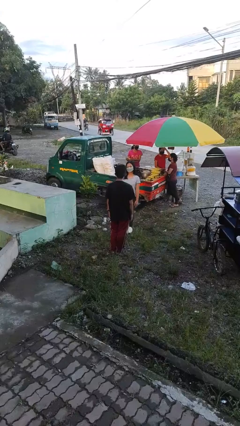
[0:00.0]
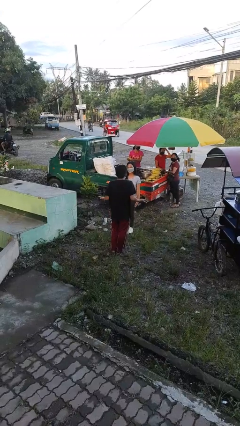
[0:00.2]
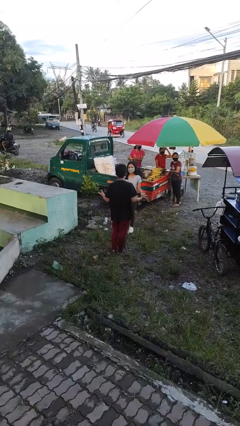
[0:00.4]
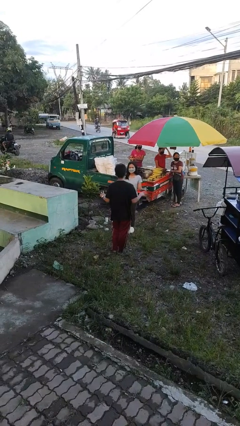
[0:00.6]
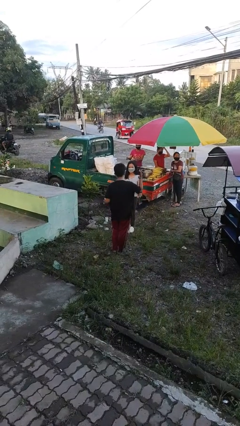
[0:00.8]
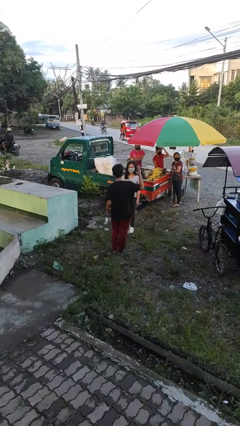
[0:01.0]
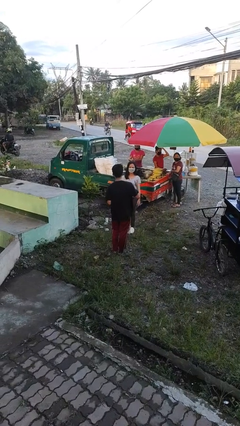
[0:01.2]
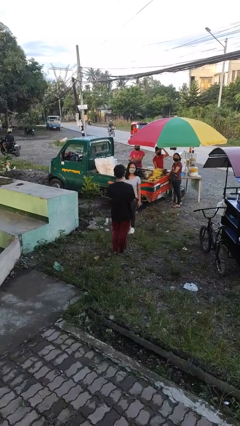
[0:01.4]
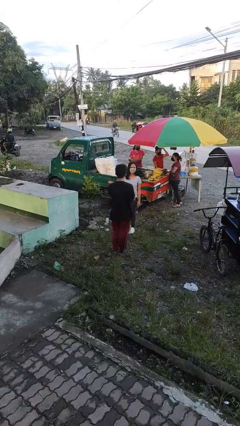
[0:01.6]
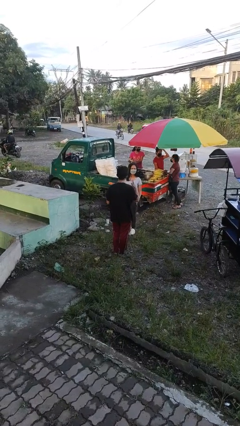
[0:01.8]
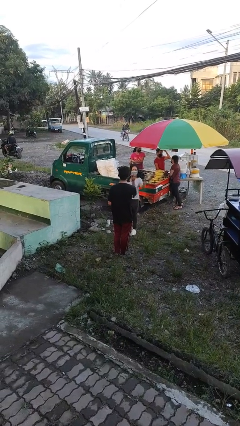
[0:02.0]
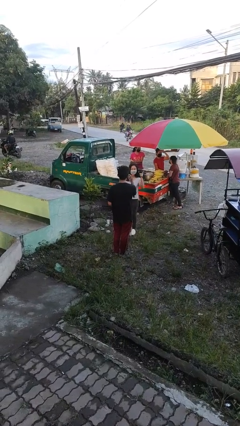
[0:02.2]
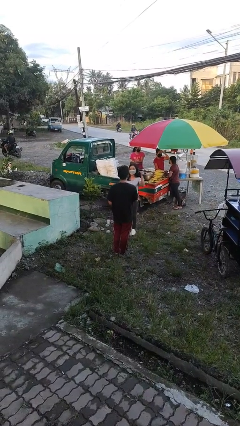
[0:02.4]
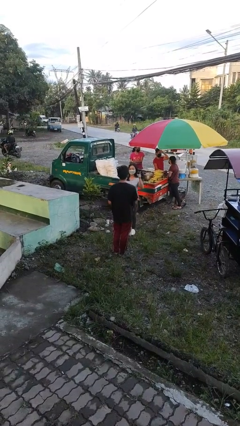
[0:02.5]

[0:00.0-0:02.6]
person talks to person

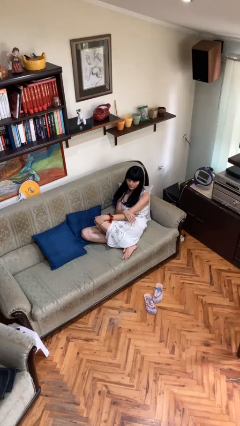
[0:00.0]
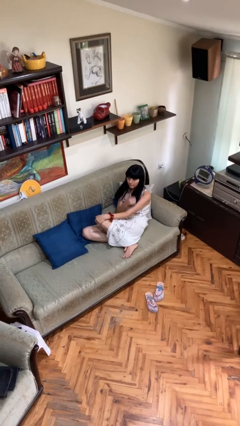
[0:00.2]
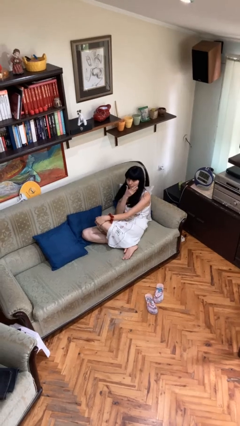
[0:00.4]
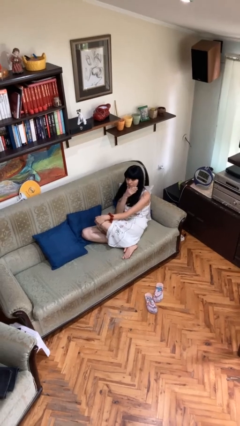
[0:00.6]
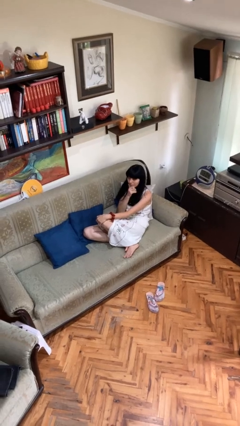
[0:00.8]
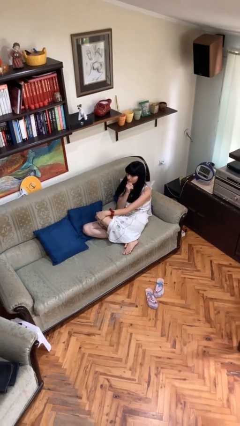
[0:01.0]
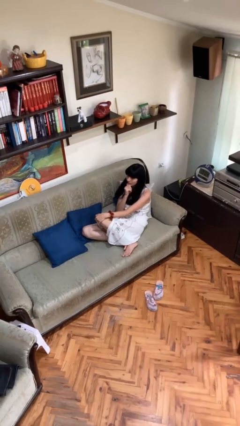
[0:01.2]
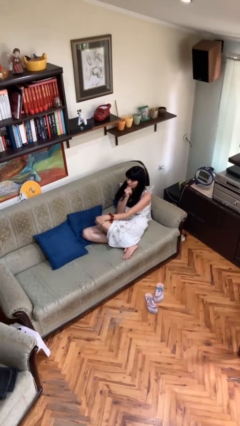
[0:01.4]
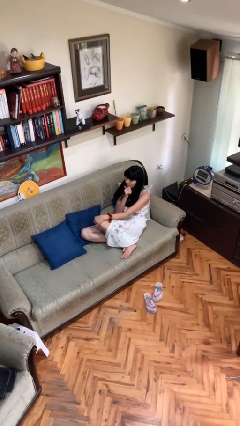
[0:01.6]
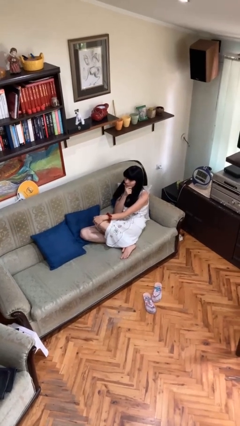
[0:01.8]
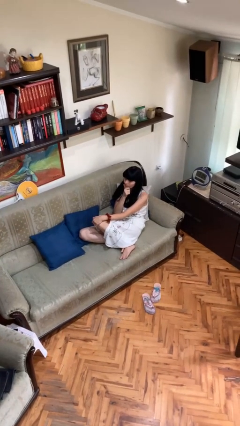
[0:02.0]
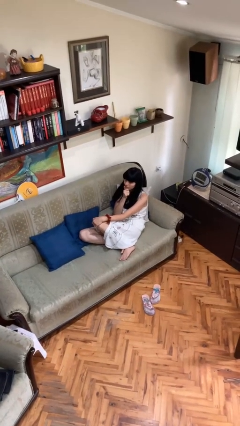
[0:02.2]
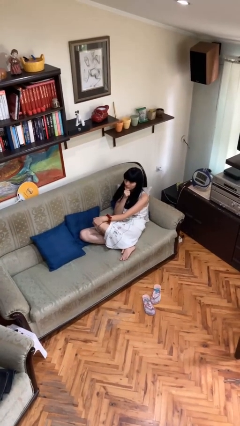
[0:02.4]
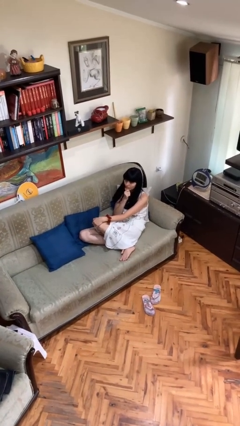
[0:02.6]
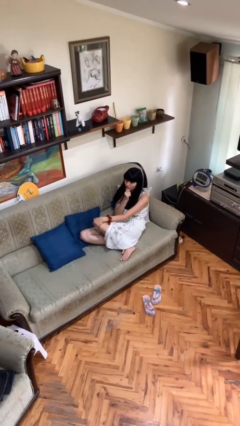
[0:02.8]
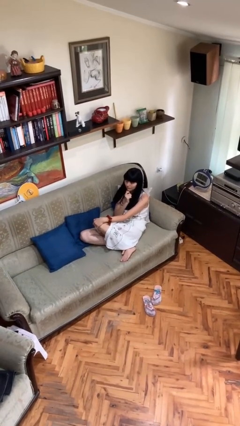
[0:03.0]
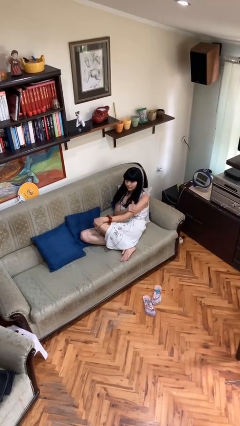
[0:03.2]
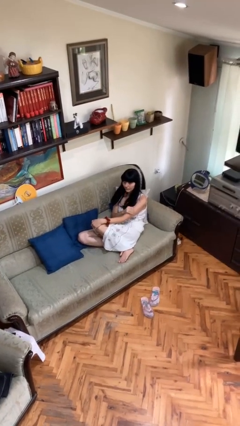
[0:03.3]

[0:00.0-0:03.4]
person strokes chin

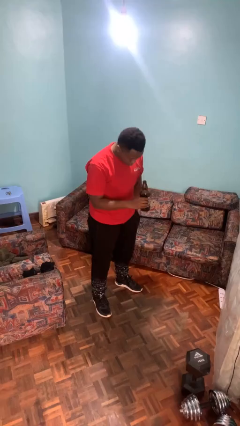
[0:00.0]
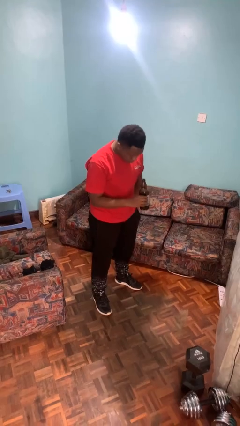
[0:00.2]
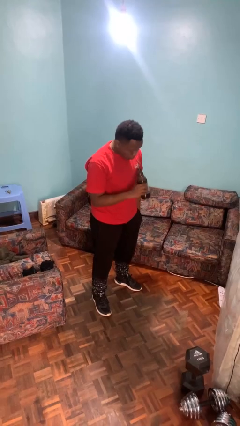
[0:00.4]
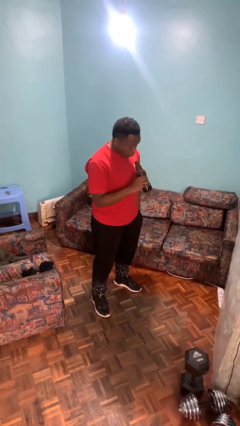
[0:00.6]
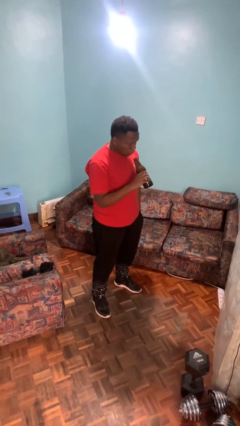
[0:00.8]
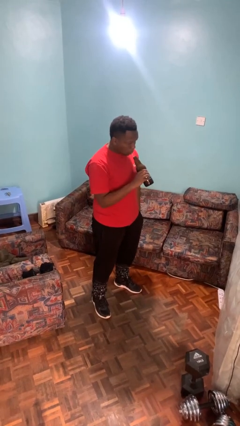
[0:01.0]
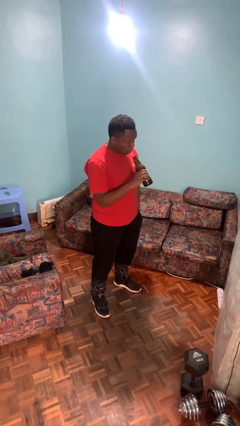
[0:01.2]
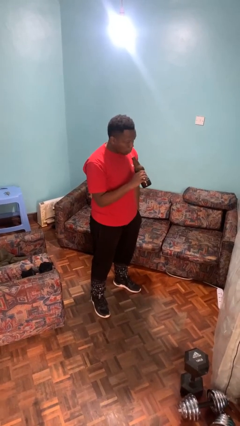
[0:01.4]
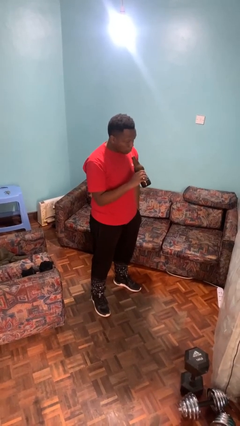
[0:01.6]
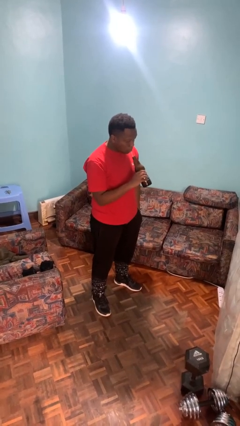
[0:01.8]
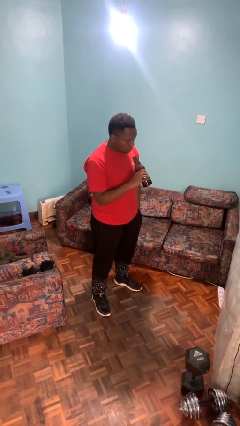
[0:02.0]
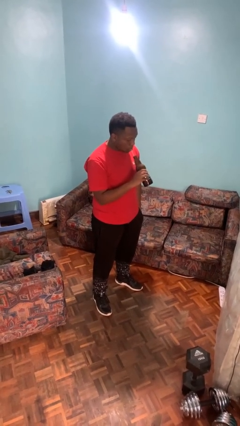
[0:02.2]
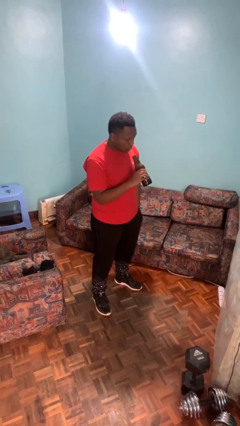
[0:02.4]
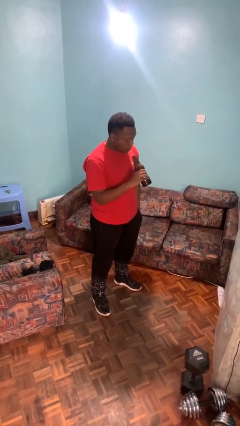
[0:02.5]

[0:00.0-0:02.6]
person drinks from straw

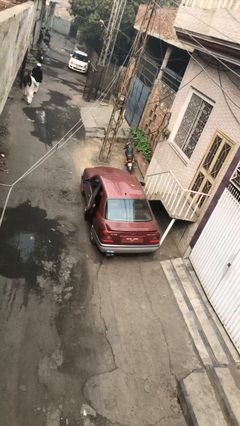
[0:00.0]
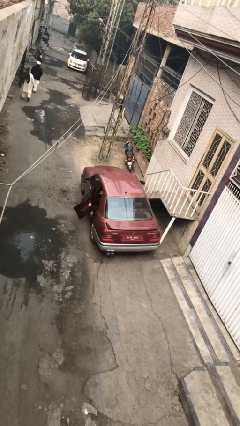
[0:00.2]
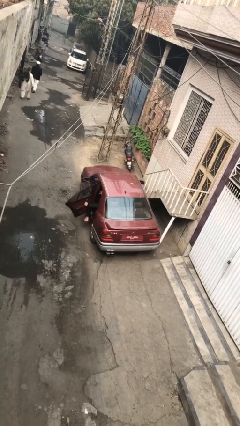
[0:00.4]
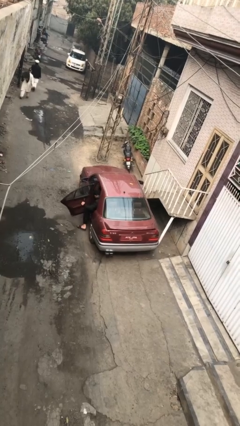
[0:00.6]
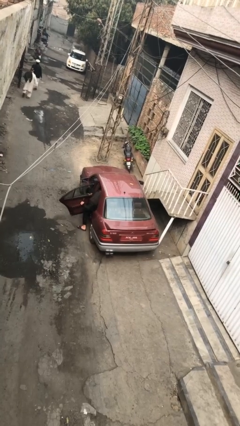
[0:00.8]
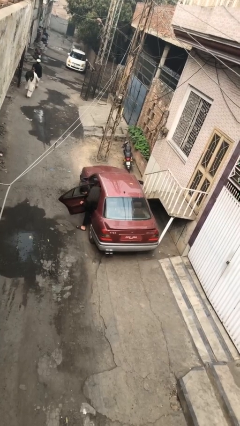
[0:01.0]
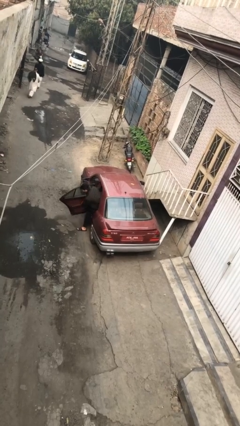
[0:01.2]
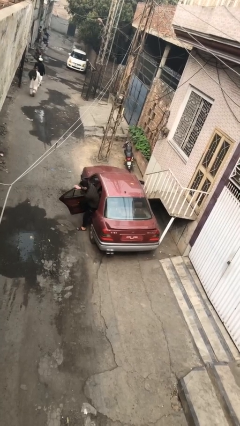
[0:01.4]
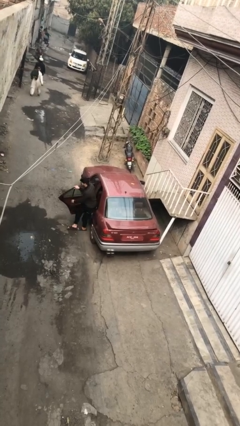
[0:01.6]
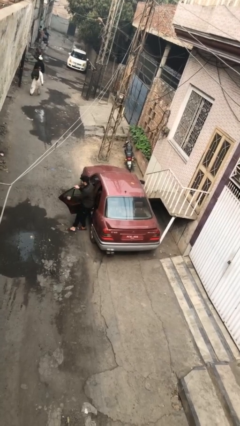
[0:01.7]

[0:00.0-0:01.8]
car drops off person

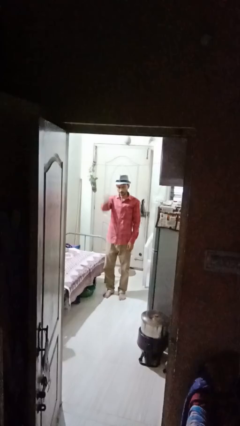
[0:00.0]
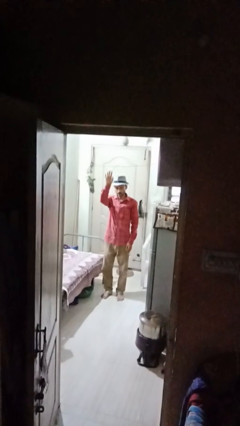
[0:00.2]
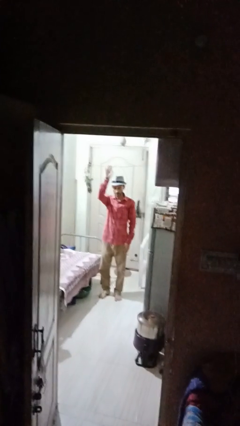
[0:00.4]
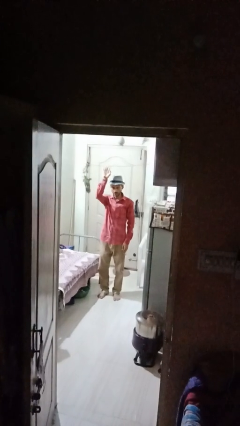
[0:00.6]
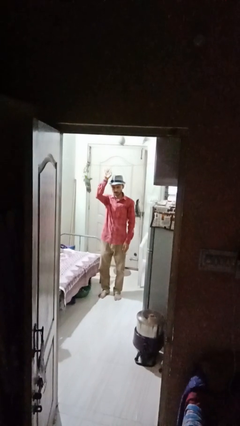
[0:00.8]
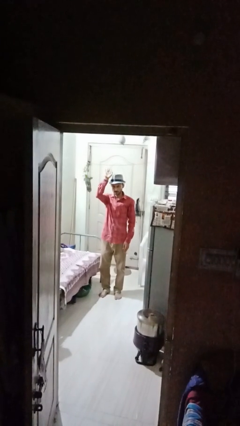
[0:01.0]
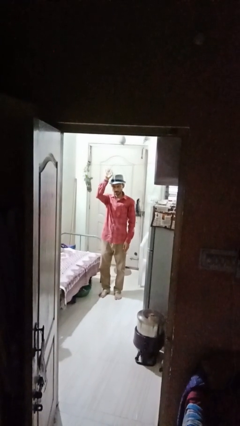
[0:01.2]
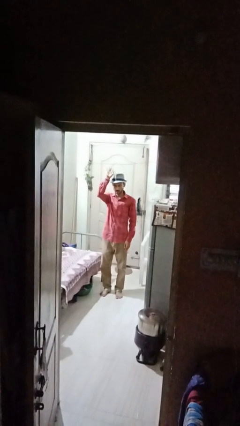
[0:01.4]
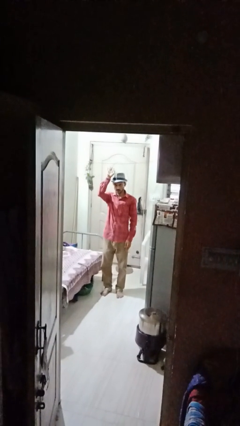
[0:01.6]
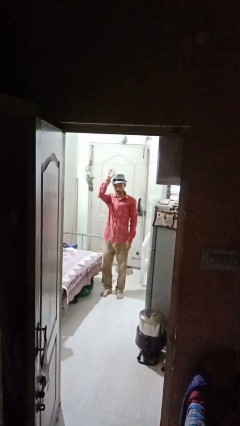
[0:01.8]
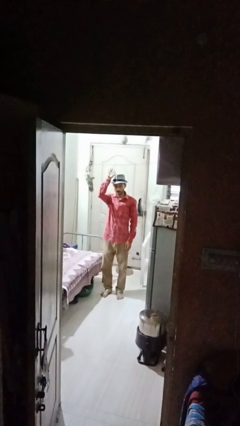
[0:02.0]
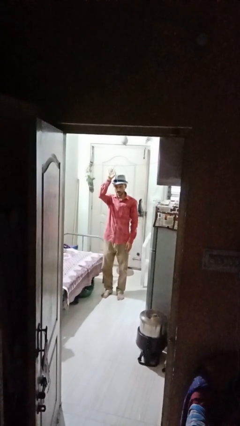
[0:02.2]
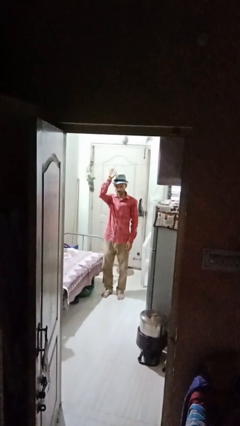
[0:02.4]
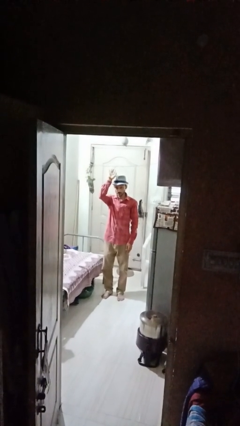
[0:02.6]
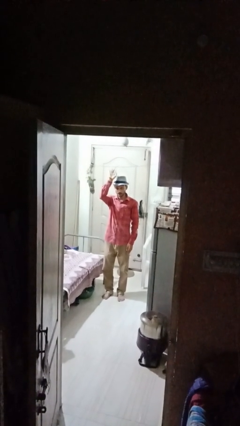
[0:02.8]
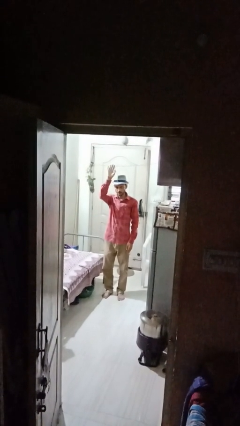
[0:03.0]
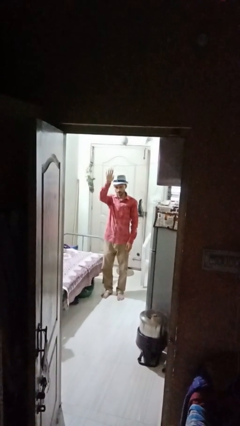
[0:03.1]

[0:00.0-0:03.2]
person gestures raise hand

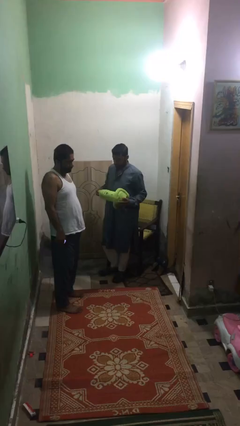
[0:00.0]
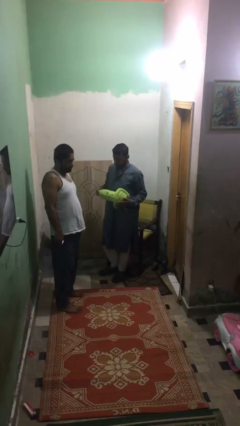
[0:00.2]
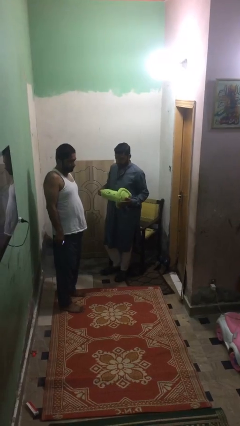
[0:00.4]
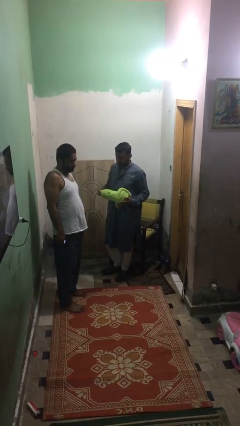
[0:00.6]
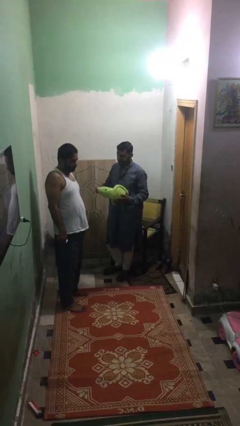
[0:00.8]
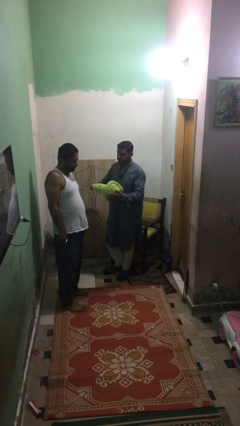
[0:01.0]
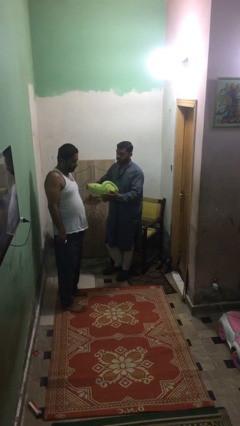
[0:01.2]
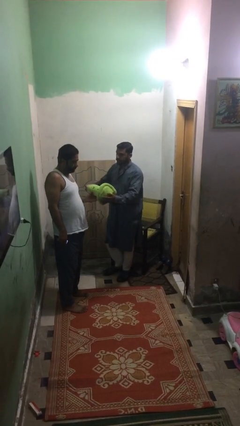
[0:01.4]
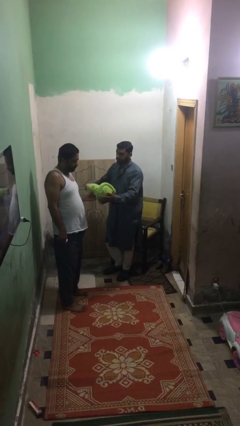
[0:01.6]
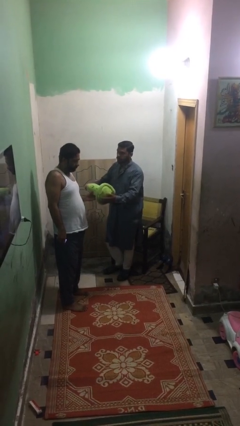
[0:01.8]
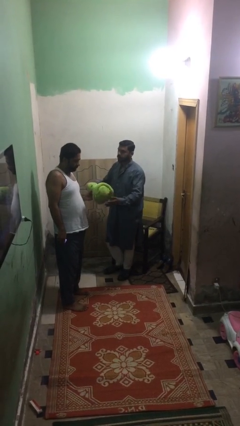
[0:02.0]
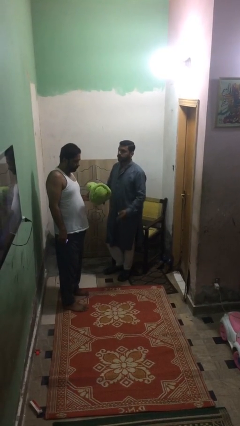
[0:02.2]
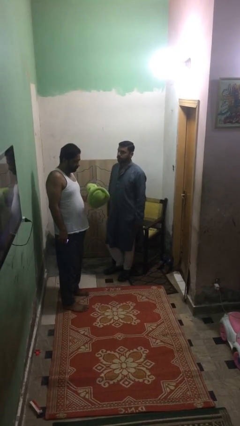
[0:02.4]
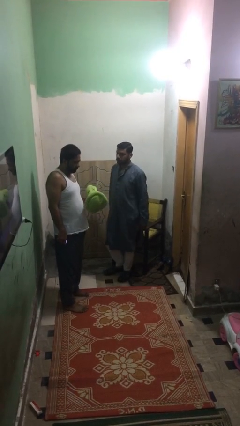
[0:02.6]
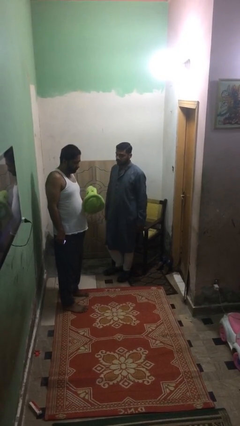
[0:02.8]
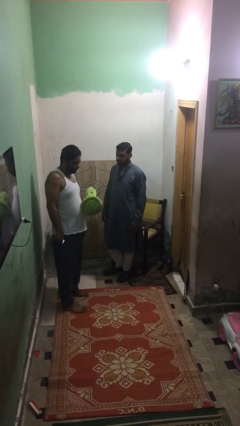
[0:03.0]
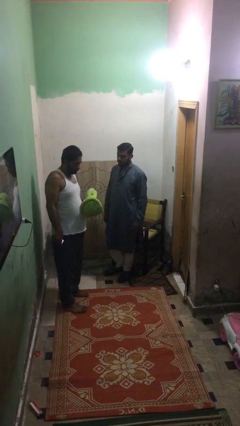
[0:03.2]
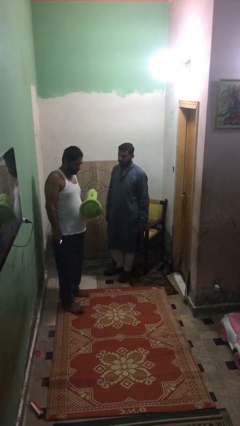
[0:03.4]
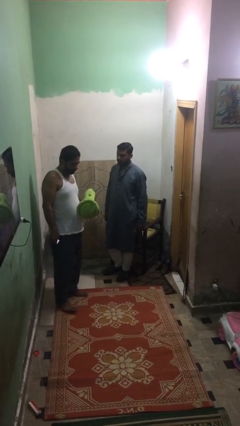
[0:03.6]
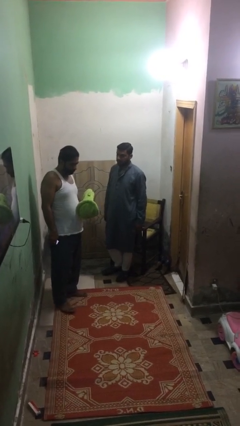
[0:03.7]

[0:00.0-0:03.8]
person transfers object to person

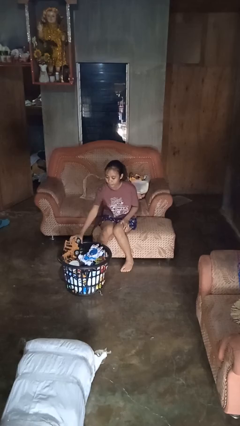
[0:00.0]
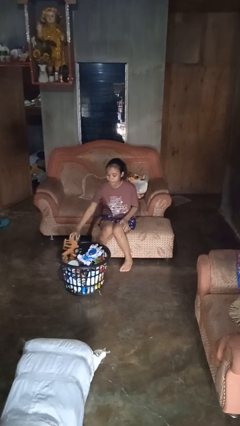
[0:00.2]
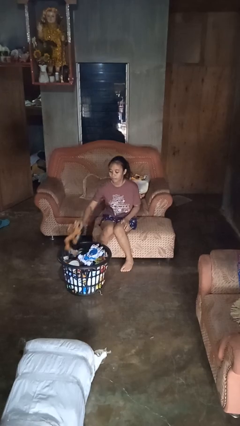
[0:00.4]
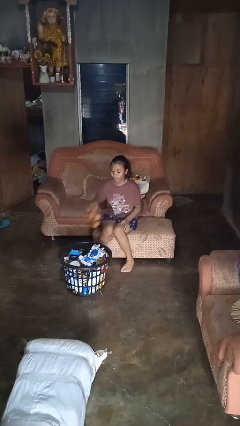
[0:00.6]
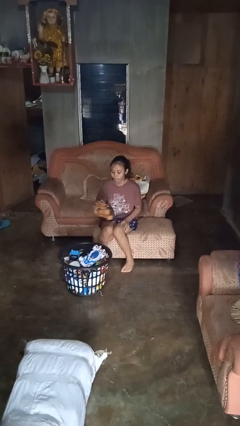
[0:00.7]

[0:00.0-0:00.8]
person takes object from basket
